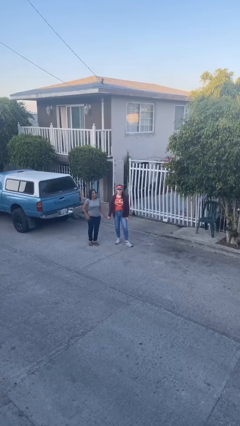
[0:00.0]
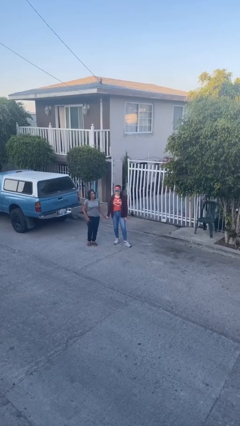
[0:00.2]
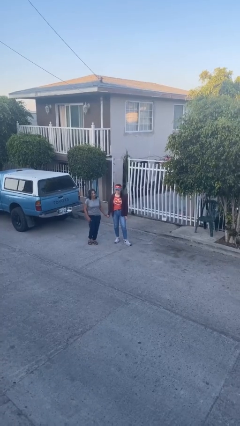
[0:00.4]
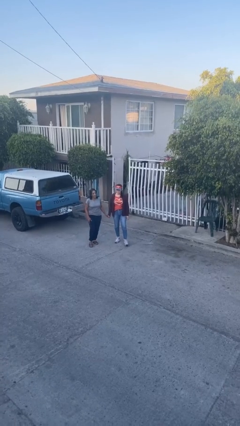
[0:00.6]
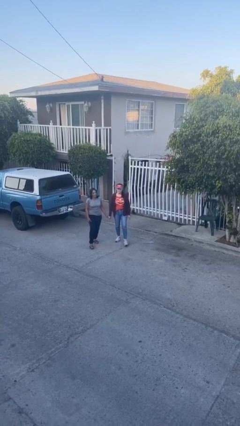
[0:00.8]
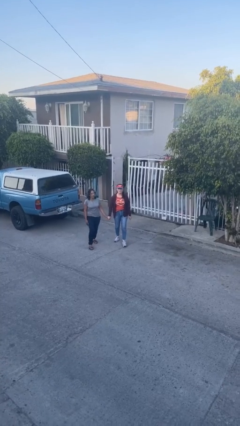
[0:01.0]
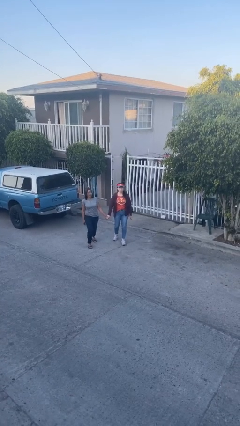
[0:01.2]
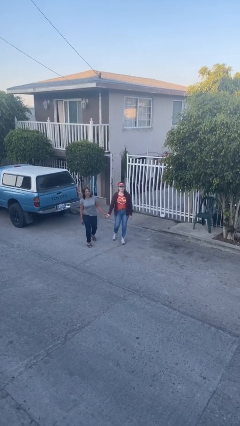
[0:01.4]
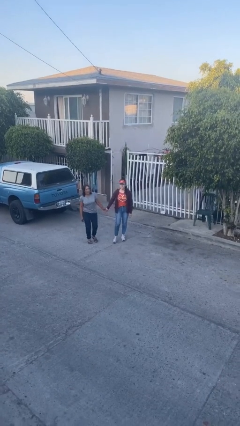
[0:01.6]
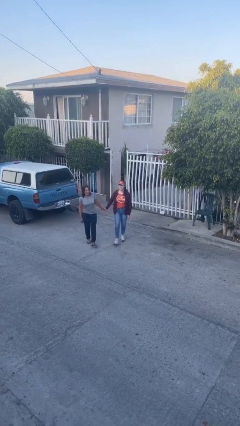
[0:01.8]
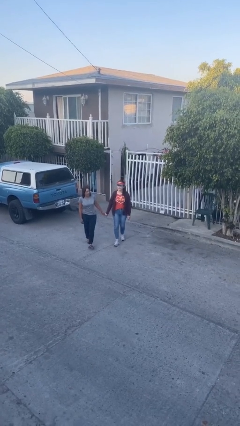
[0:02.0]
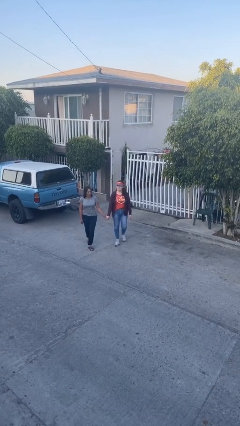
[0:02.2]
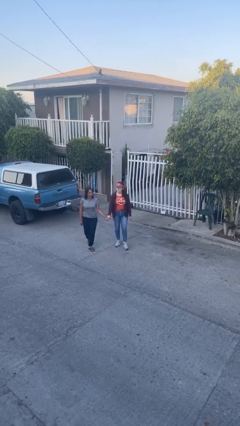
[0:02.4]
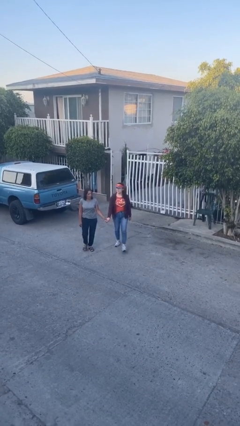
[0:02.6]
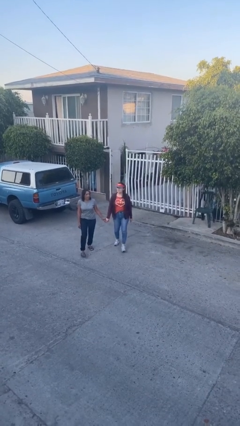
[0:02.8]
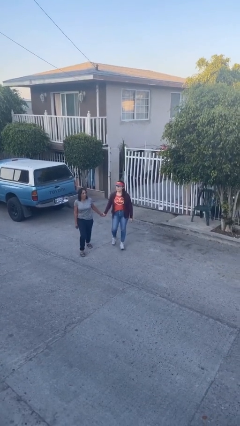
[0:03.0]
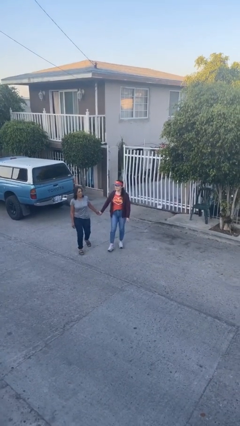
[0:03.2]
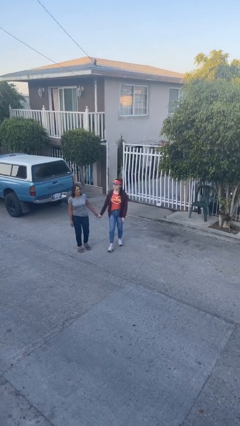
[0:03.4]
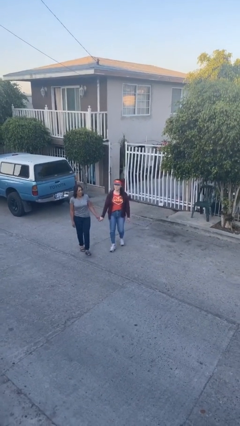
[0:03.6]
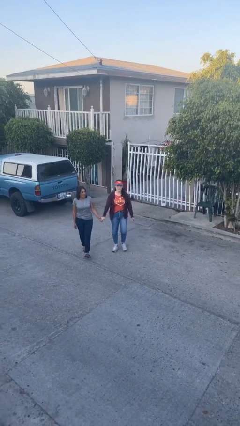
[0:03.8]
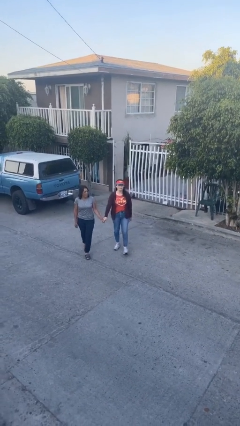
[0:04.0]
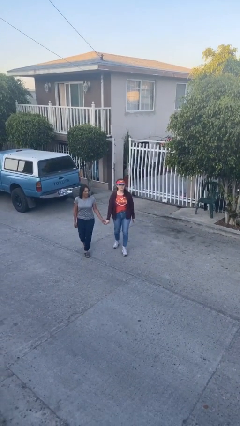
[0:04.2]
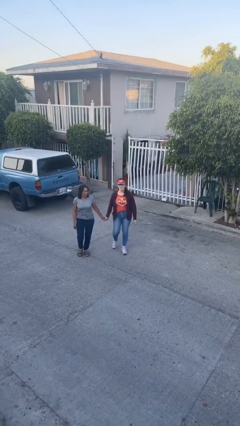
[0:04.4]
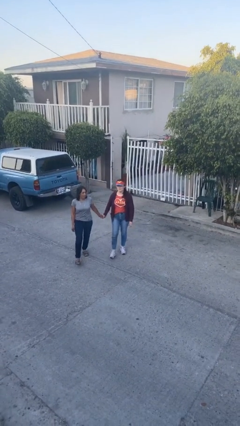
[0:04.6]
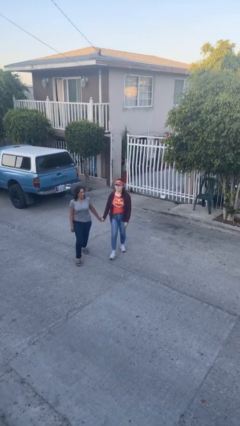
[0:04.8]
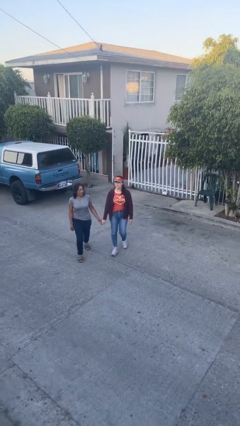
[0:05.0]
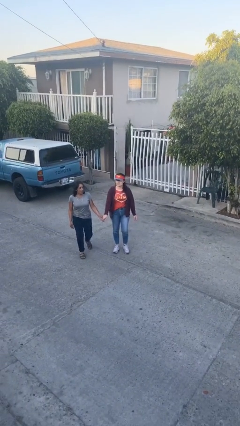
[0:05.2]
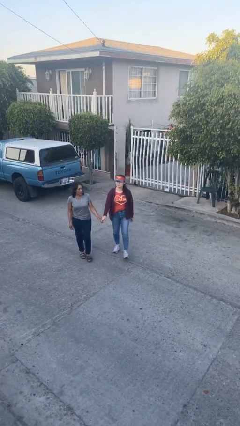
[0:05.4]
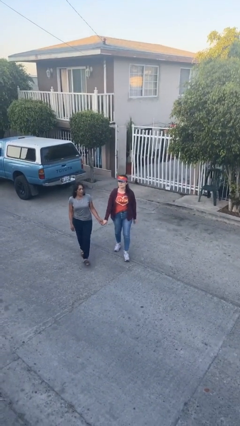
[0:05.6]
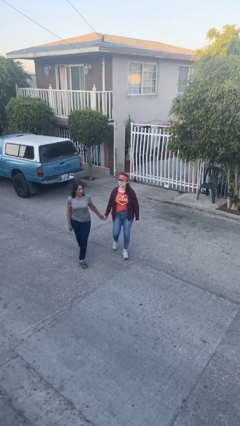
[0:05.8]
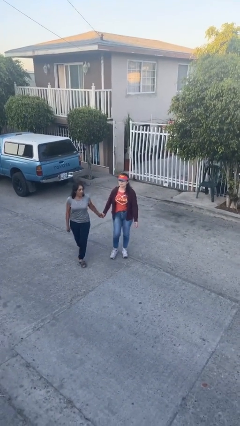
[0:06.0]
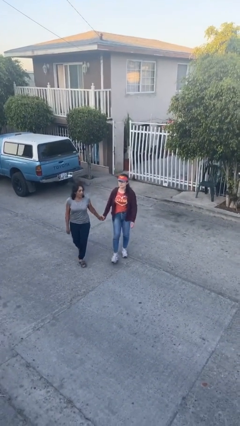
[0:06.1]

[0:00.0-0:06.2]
person holds hand

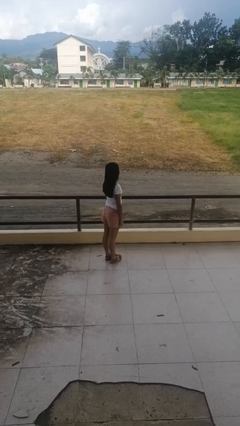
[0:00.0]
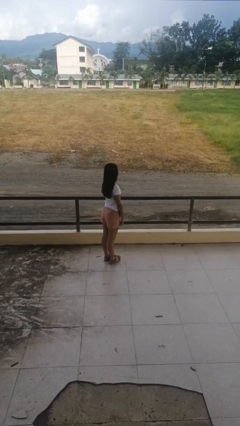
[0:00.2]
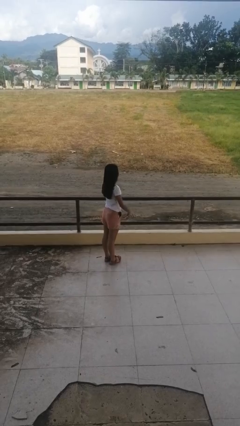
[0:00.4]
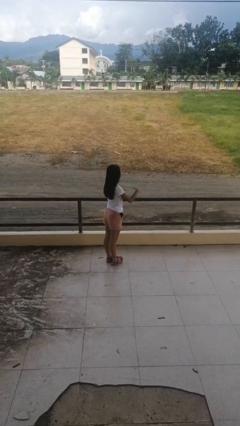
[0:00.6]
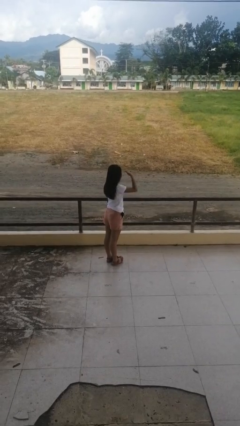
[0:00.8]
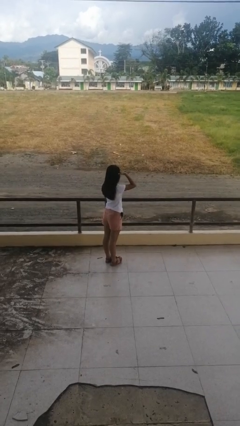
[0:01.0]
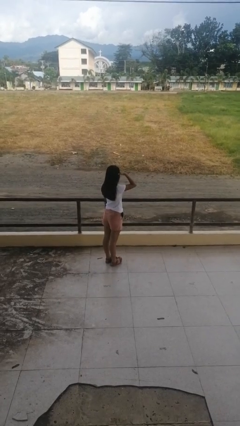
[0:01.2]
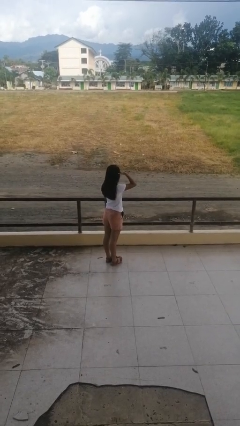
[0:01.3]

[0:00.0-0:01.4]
person shades eyes

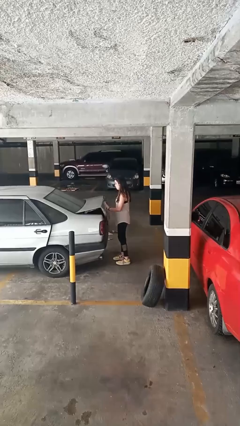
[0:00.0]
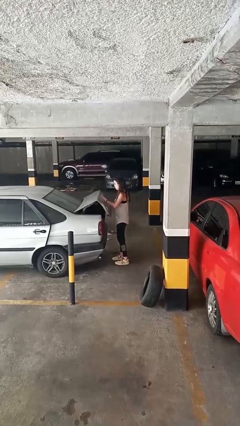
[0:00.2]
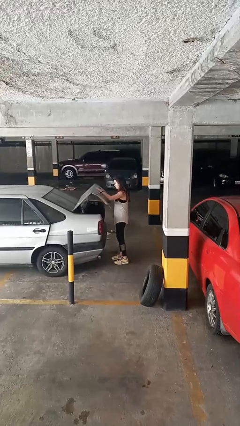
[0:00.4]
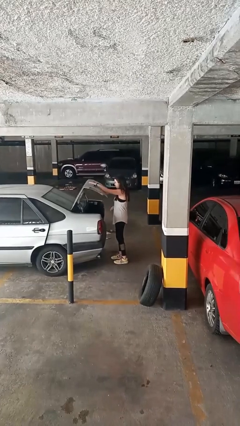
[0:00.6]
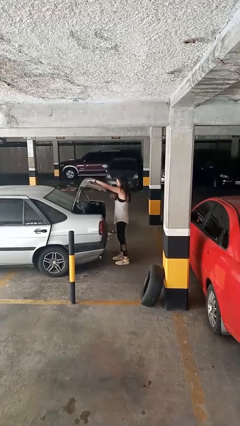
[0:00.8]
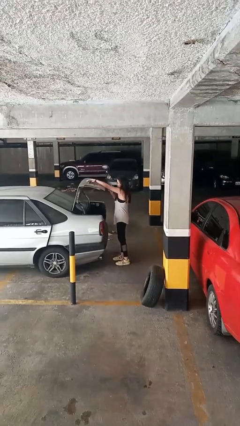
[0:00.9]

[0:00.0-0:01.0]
person opens car trunk

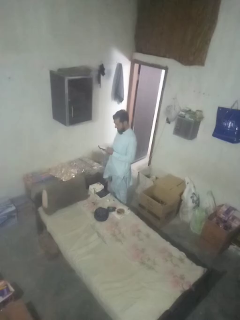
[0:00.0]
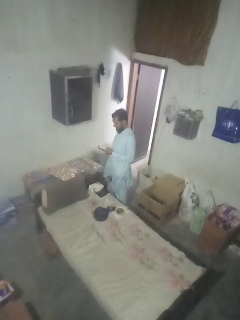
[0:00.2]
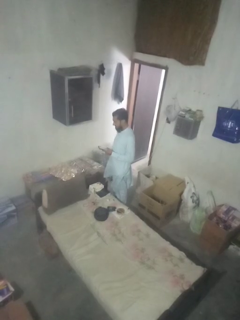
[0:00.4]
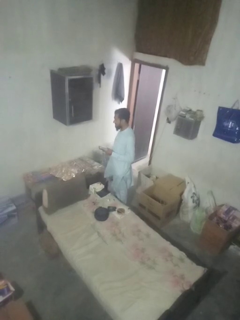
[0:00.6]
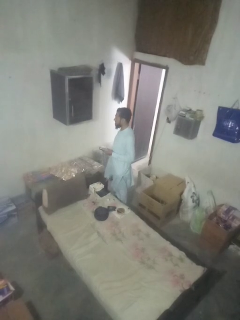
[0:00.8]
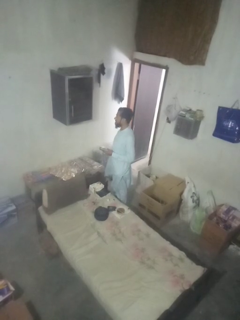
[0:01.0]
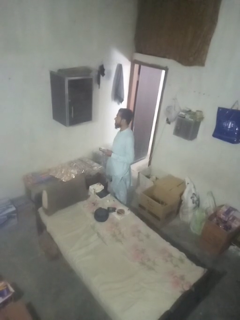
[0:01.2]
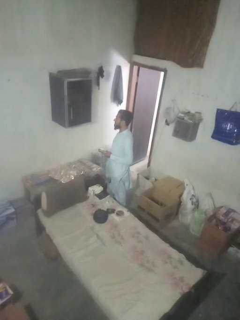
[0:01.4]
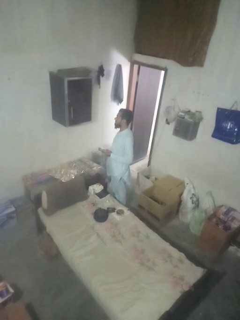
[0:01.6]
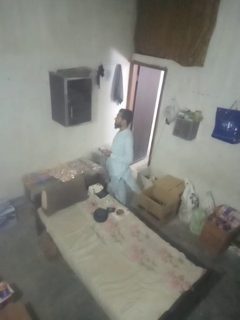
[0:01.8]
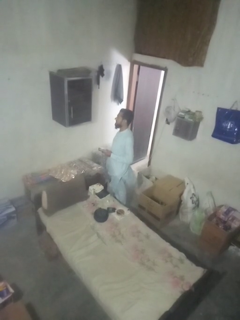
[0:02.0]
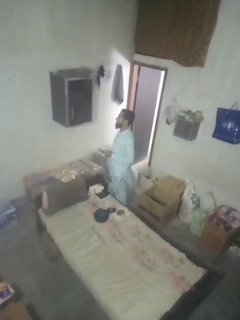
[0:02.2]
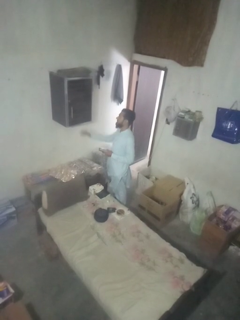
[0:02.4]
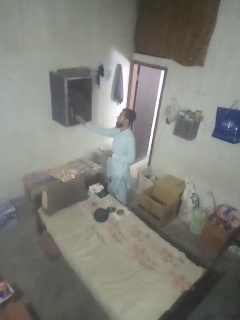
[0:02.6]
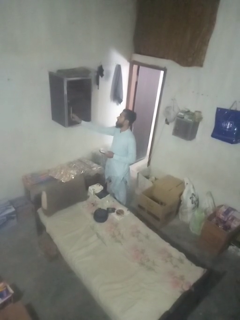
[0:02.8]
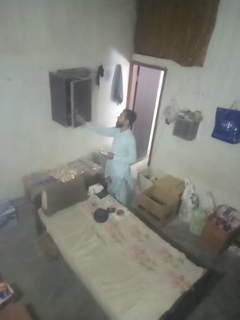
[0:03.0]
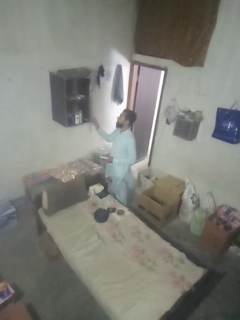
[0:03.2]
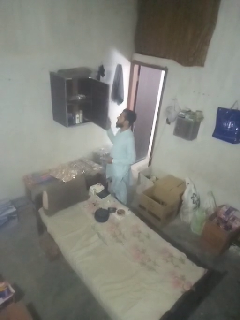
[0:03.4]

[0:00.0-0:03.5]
person opens dresser drawer

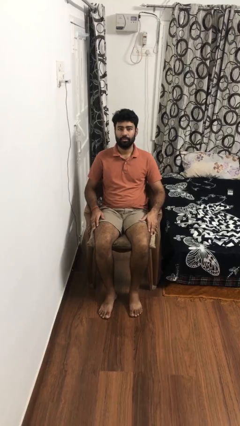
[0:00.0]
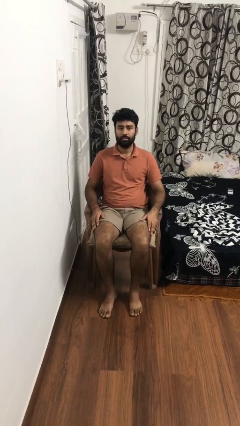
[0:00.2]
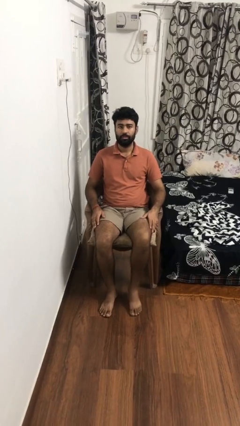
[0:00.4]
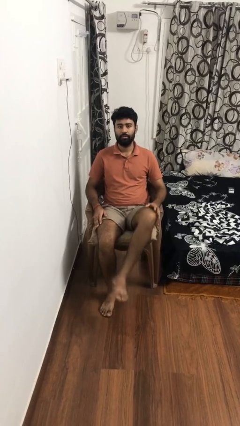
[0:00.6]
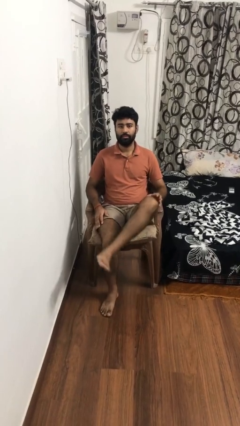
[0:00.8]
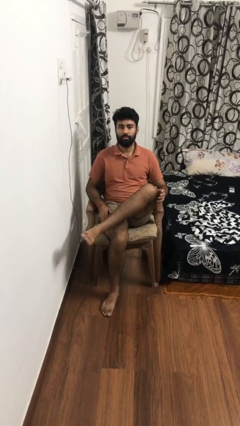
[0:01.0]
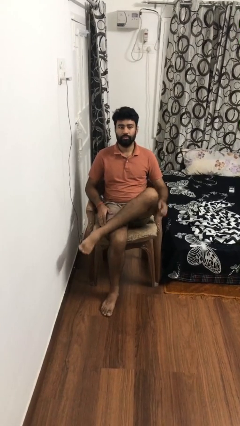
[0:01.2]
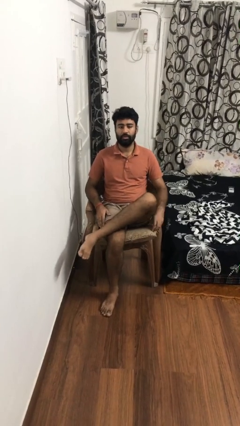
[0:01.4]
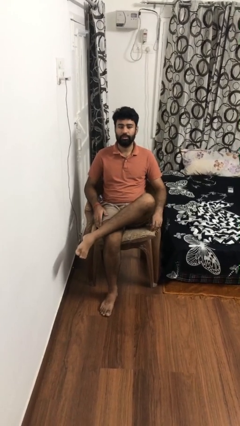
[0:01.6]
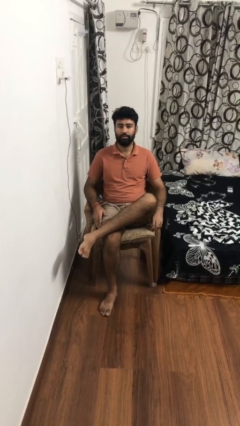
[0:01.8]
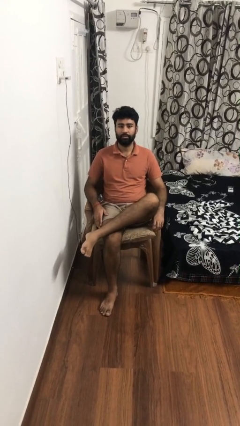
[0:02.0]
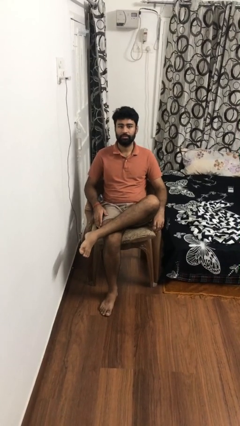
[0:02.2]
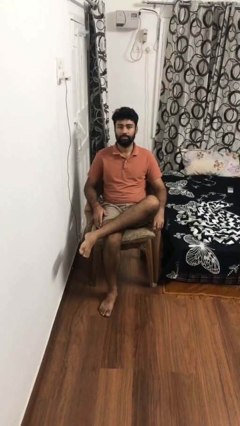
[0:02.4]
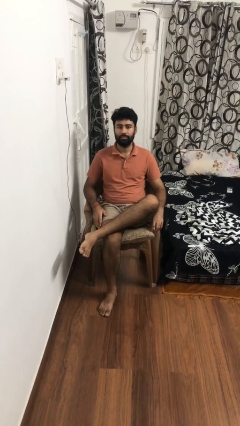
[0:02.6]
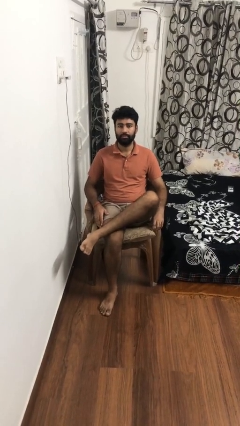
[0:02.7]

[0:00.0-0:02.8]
person crosses legs

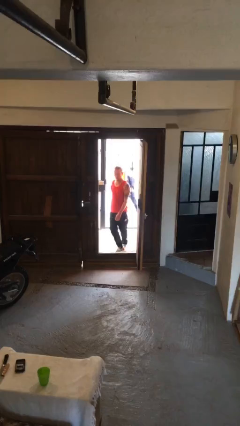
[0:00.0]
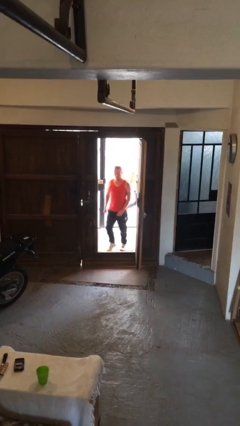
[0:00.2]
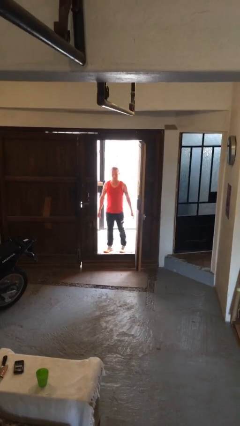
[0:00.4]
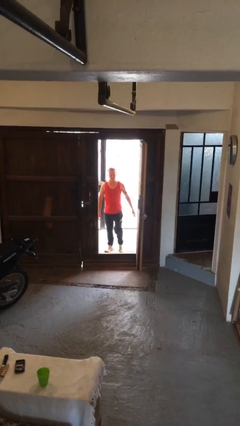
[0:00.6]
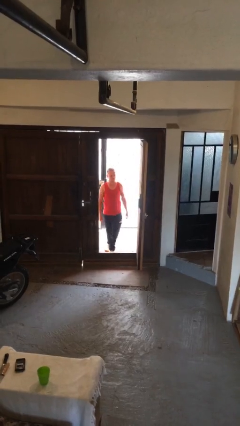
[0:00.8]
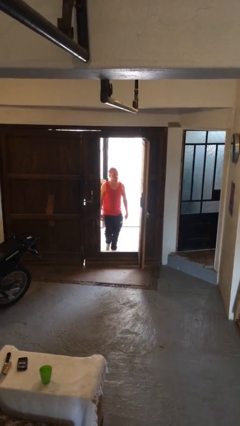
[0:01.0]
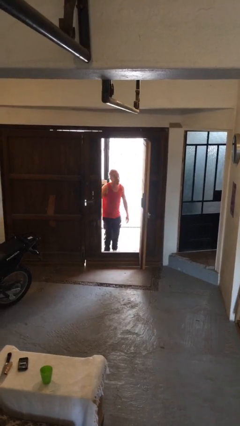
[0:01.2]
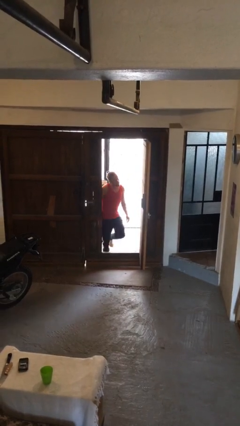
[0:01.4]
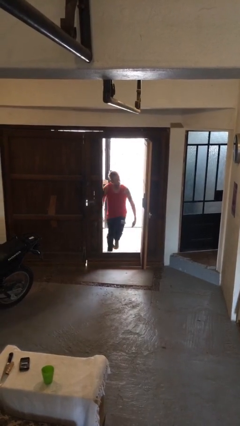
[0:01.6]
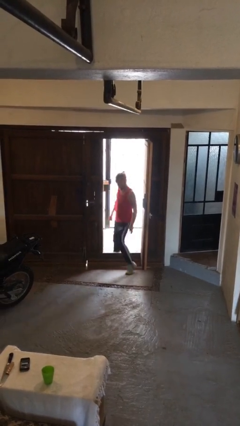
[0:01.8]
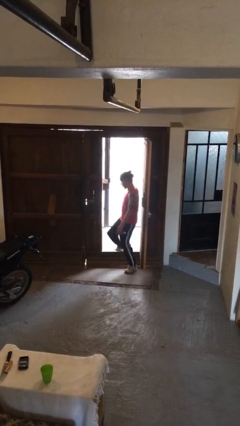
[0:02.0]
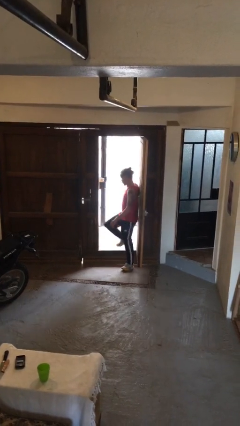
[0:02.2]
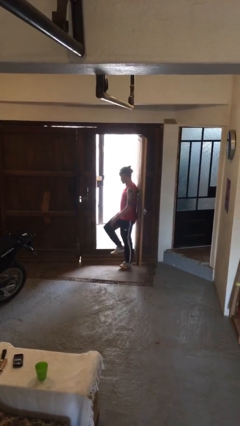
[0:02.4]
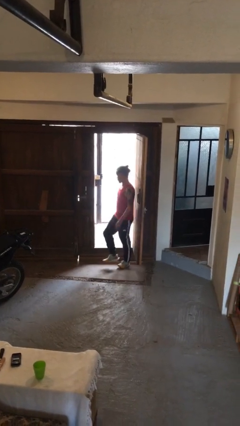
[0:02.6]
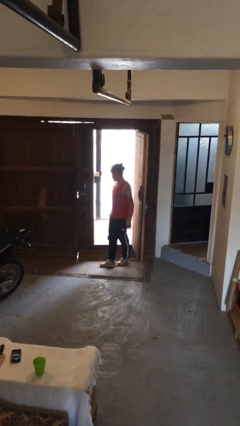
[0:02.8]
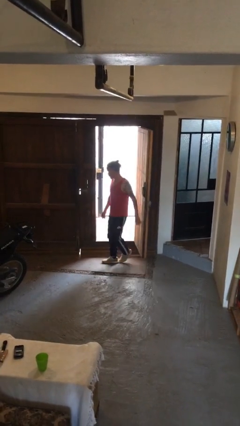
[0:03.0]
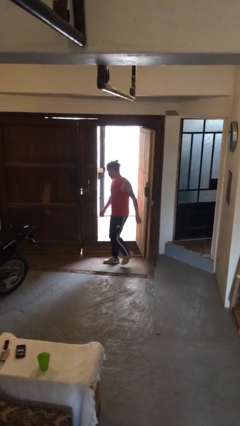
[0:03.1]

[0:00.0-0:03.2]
person bumps into wall

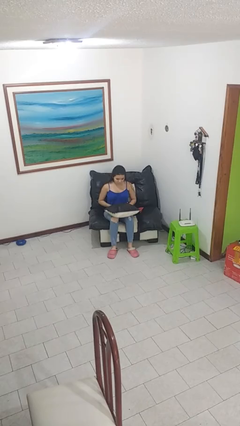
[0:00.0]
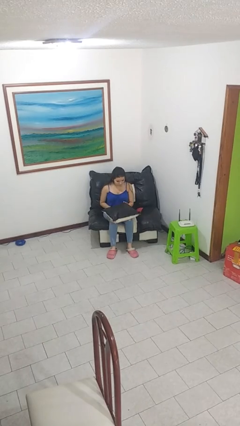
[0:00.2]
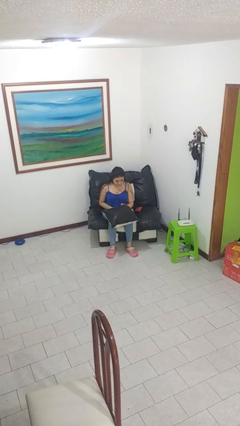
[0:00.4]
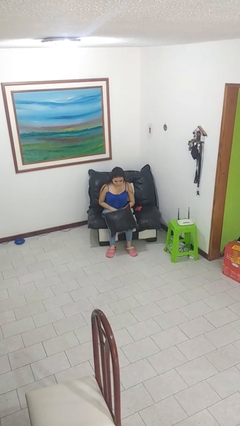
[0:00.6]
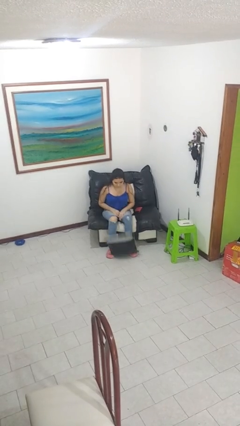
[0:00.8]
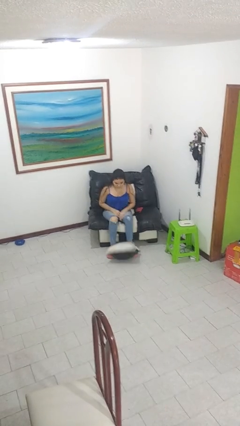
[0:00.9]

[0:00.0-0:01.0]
person drops object
